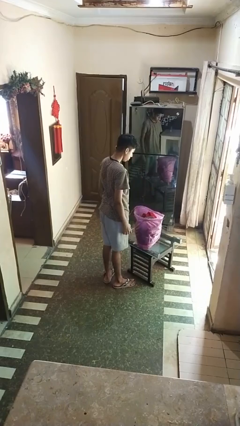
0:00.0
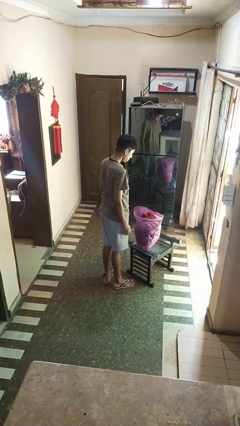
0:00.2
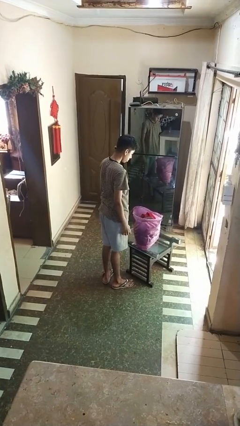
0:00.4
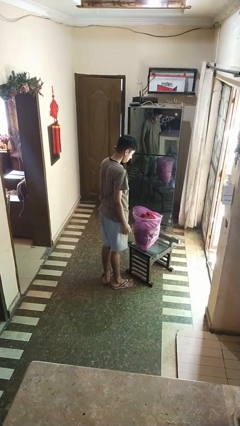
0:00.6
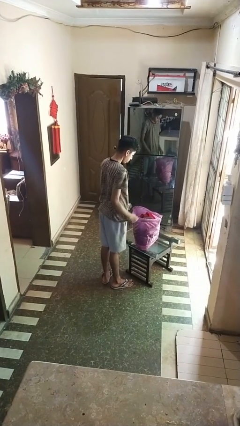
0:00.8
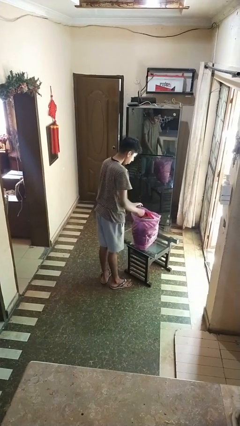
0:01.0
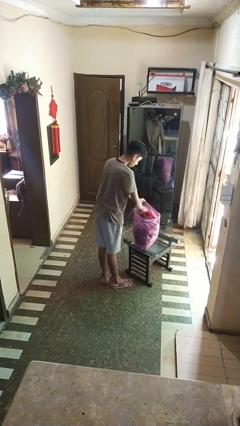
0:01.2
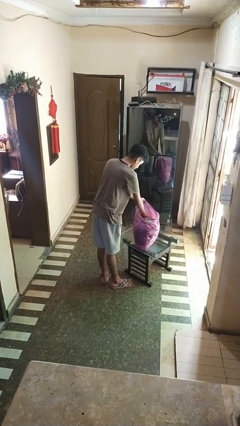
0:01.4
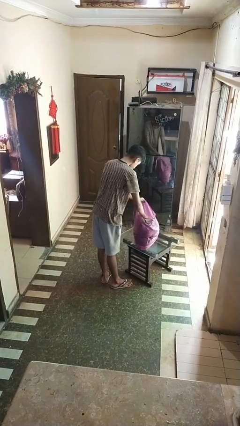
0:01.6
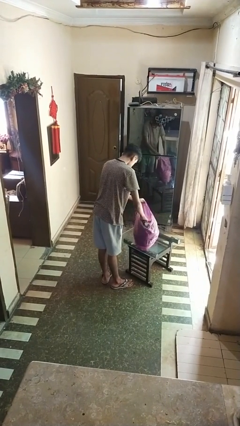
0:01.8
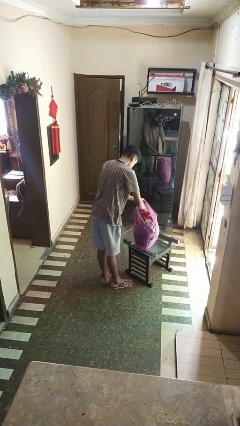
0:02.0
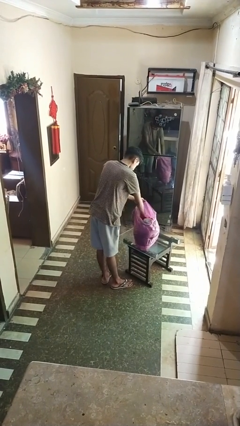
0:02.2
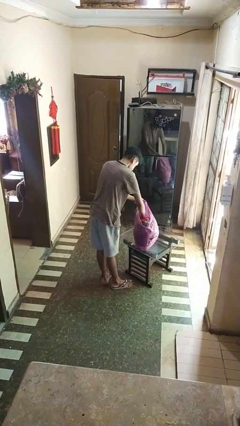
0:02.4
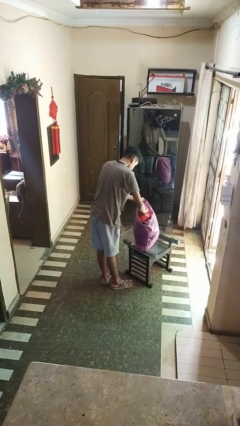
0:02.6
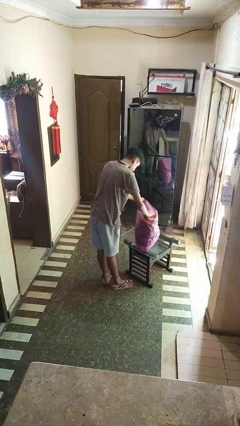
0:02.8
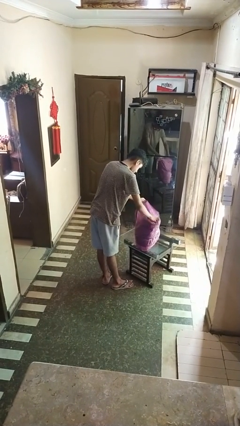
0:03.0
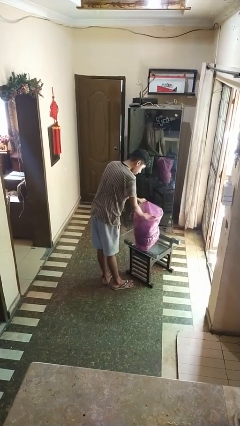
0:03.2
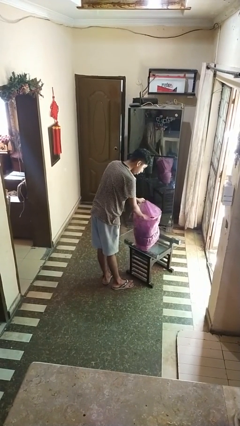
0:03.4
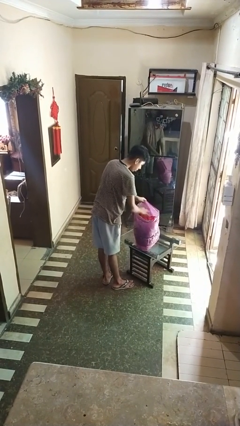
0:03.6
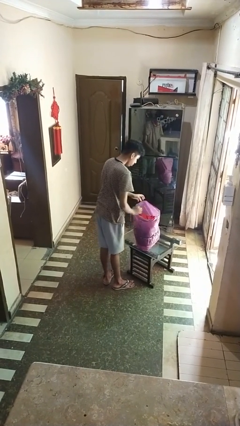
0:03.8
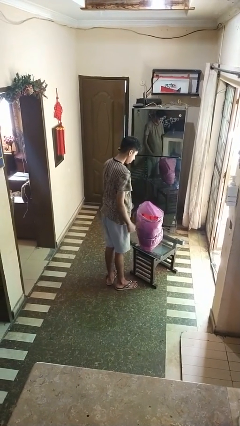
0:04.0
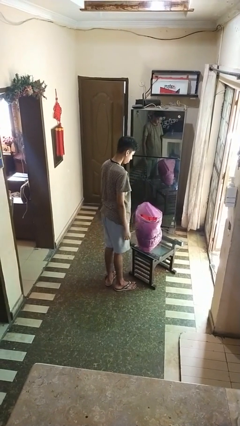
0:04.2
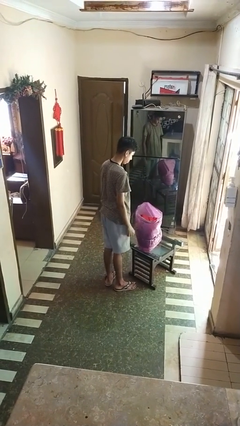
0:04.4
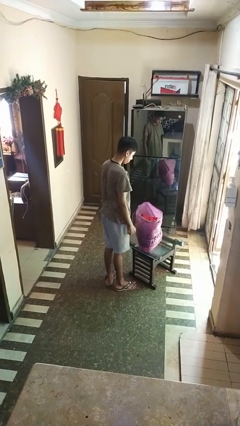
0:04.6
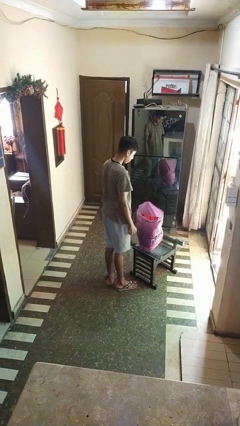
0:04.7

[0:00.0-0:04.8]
person searches in bag

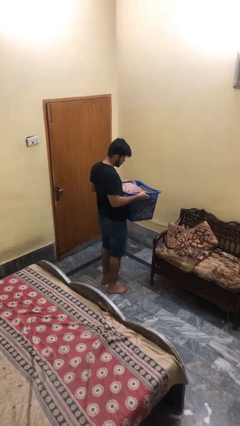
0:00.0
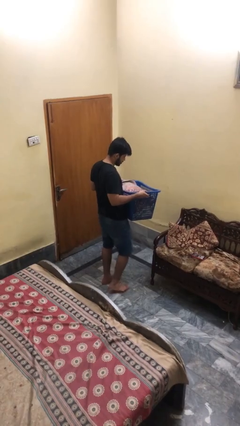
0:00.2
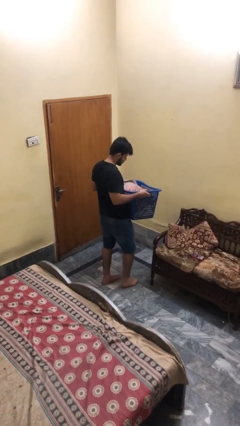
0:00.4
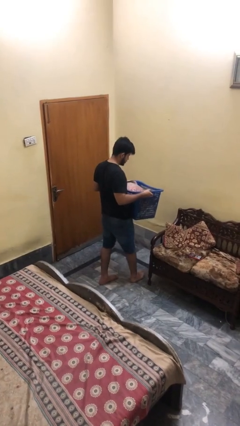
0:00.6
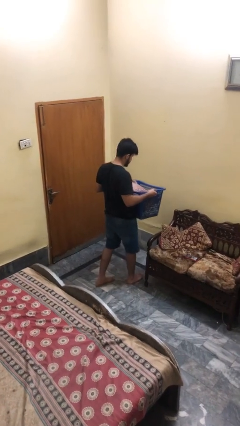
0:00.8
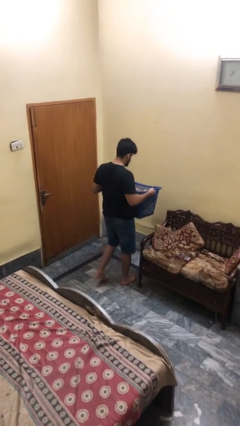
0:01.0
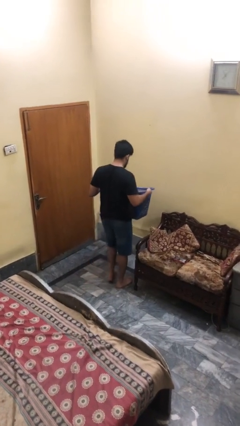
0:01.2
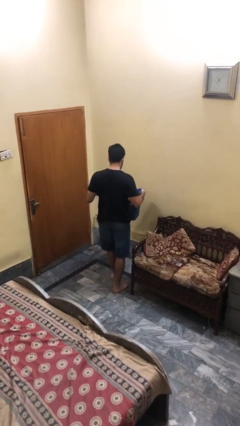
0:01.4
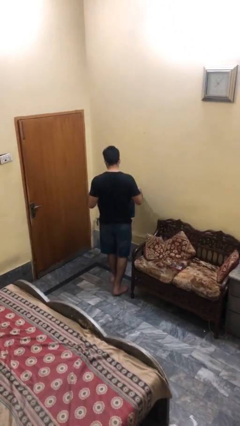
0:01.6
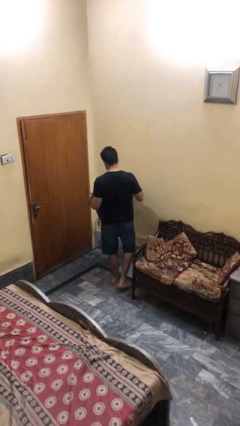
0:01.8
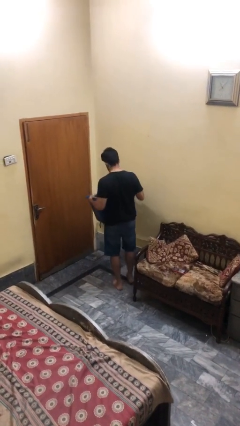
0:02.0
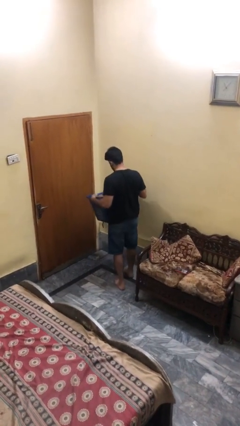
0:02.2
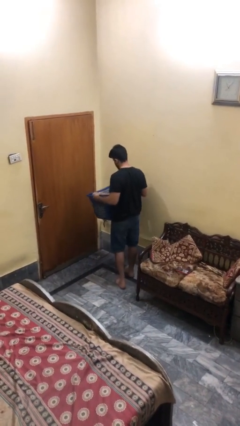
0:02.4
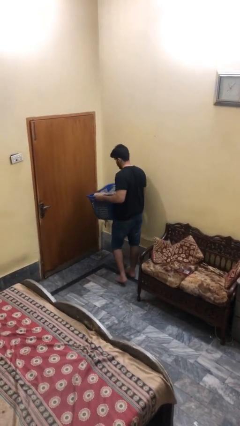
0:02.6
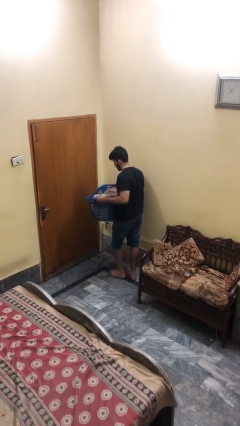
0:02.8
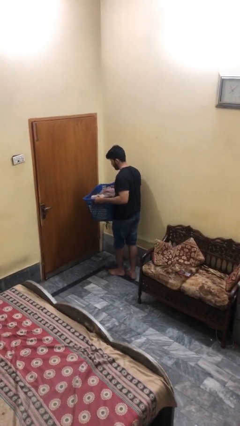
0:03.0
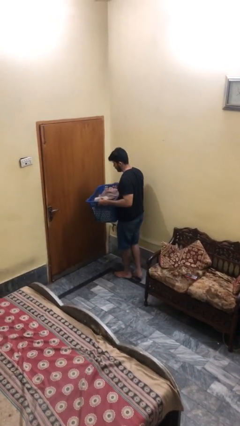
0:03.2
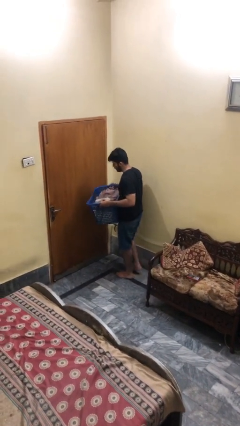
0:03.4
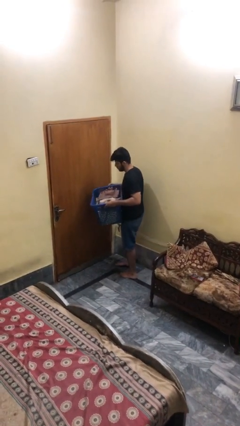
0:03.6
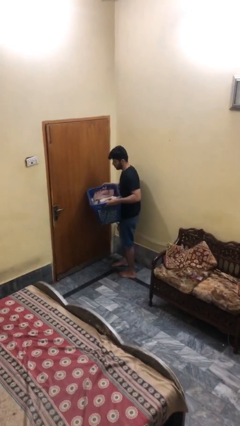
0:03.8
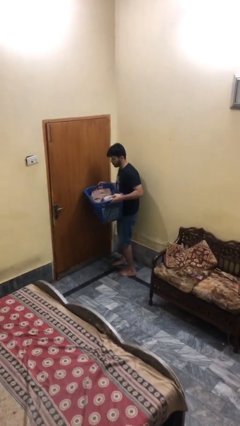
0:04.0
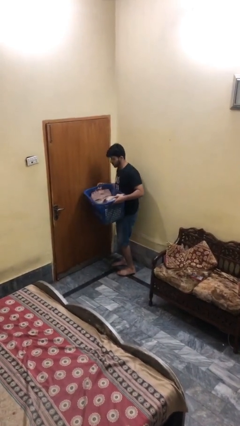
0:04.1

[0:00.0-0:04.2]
person carries laundry basket

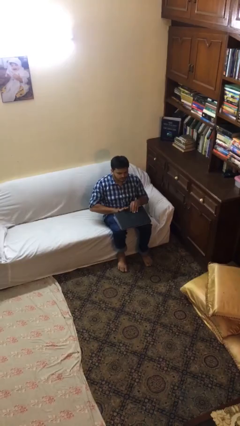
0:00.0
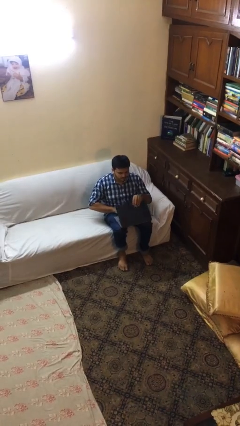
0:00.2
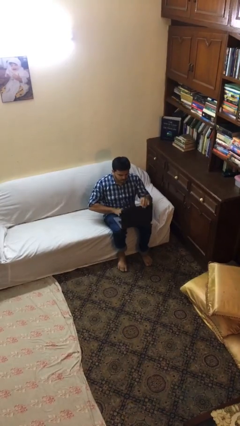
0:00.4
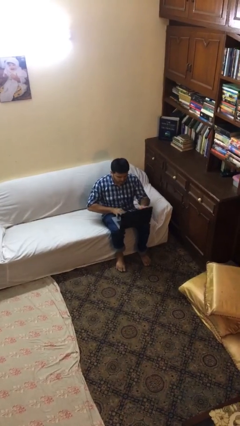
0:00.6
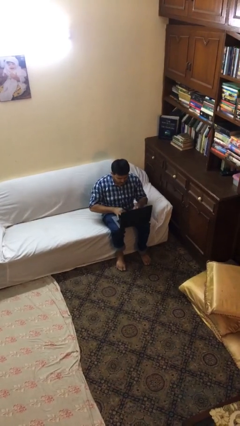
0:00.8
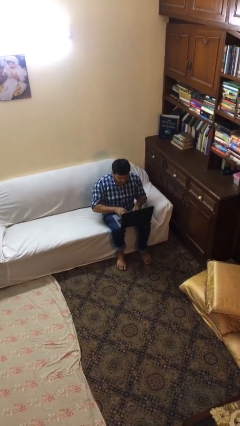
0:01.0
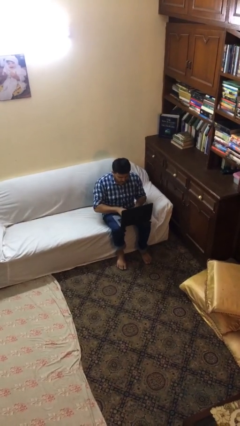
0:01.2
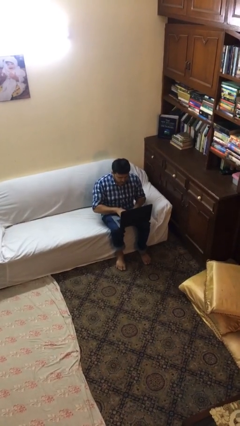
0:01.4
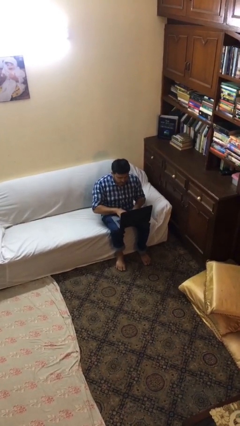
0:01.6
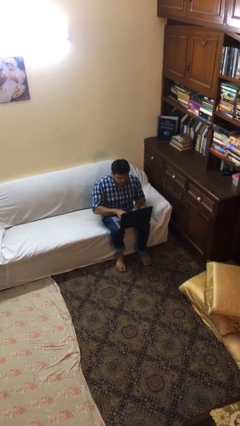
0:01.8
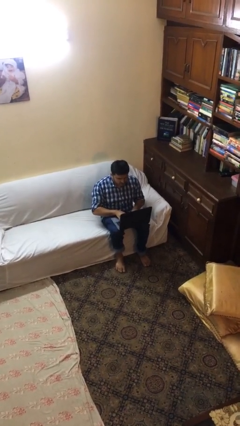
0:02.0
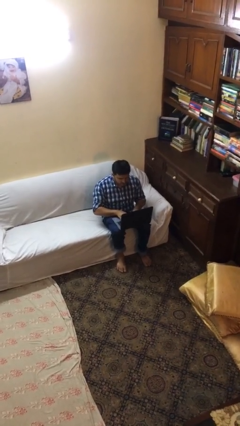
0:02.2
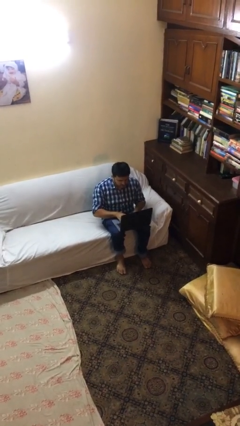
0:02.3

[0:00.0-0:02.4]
person interacts with laptop

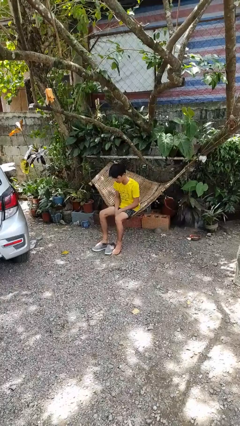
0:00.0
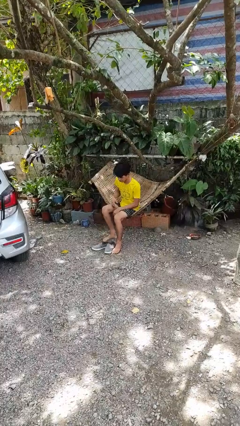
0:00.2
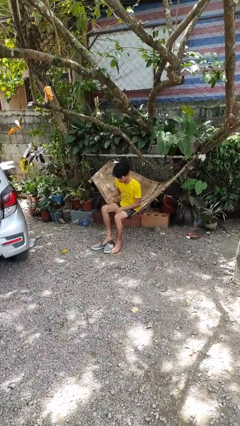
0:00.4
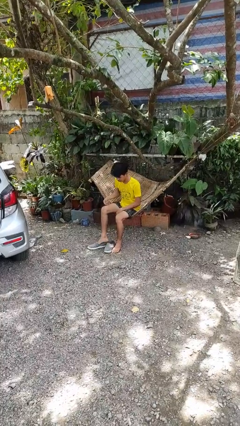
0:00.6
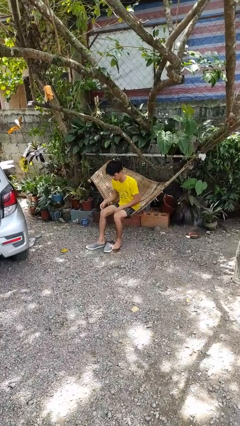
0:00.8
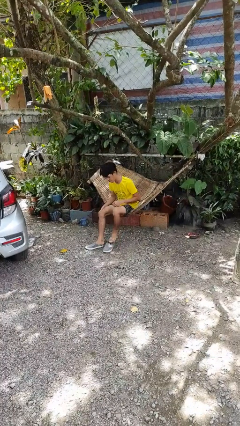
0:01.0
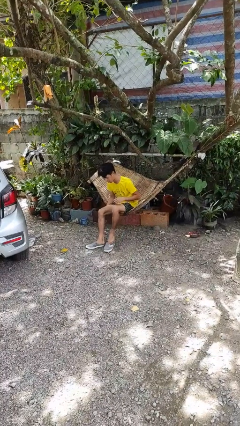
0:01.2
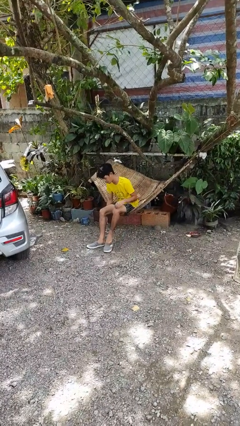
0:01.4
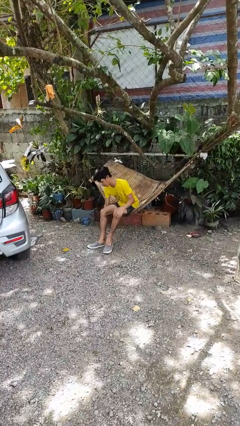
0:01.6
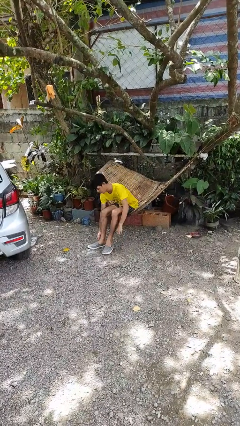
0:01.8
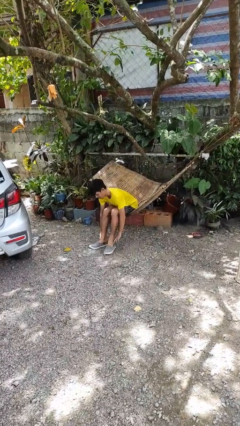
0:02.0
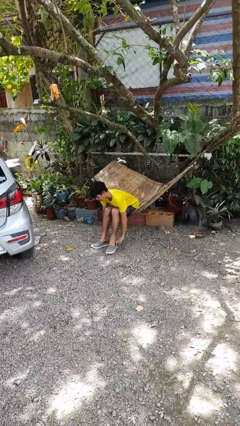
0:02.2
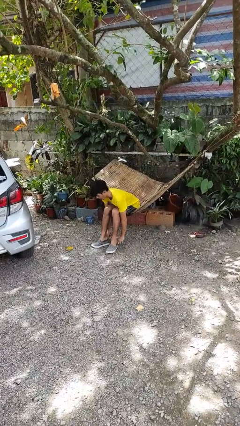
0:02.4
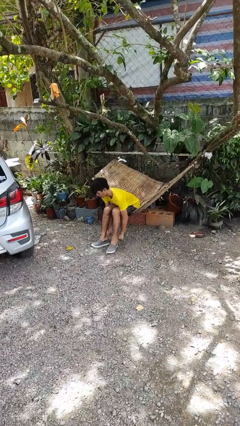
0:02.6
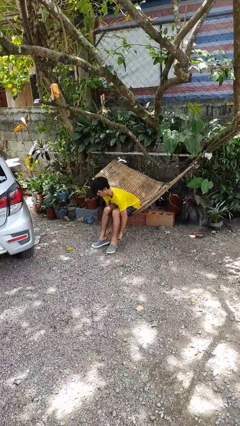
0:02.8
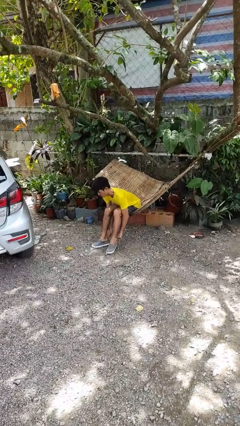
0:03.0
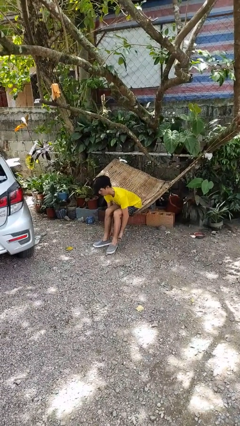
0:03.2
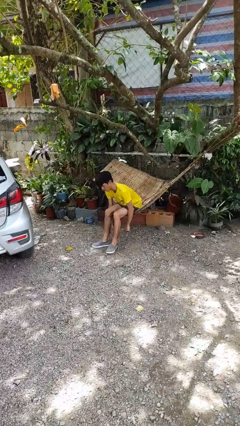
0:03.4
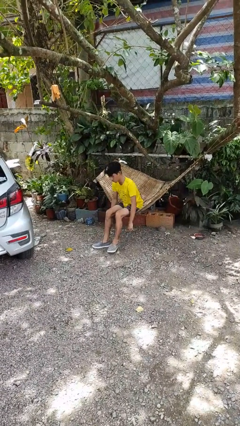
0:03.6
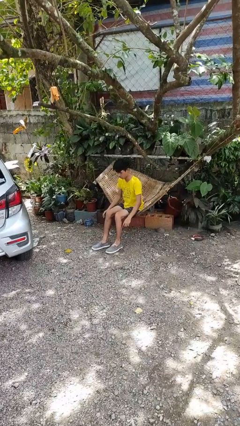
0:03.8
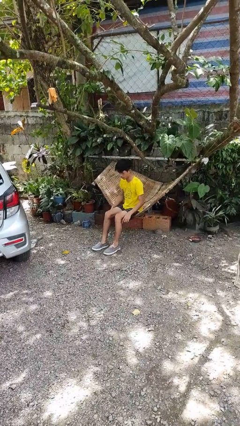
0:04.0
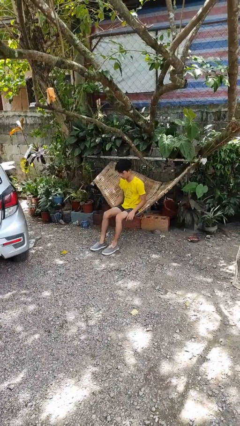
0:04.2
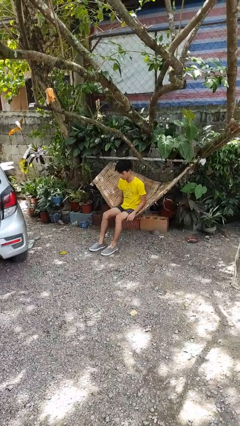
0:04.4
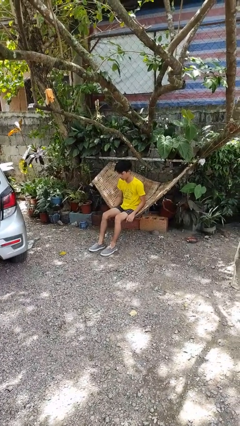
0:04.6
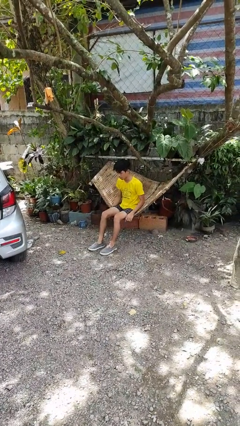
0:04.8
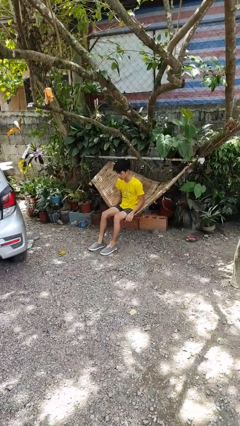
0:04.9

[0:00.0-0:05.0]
person puts on shoes

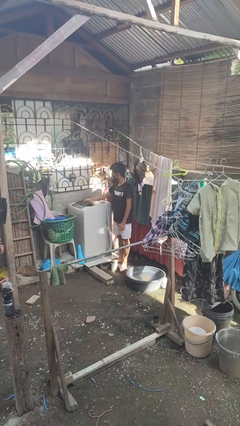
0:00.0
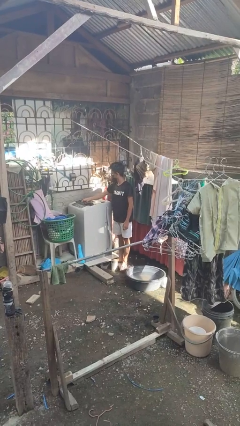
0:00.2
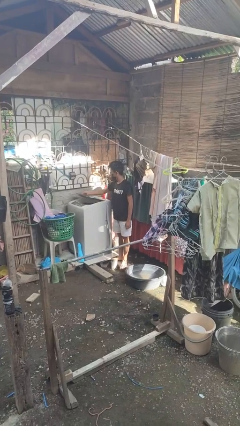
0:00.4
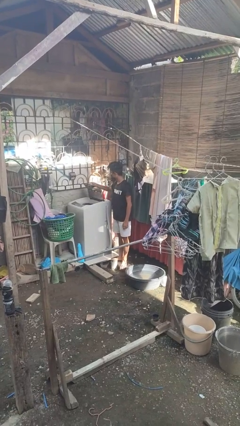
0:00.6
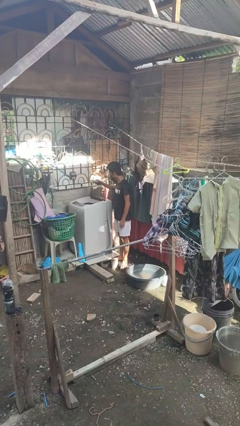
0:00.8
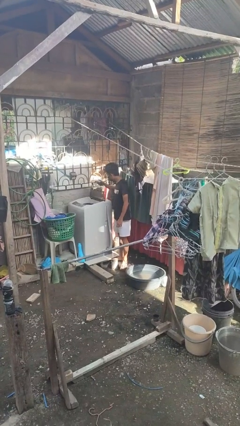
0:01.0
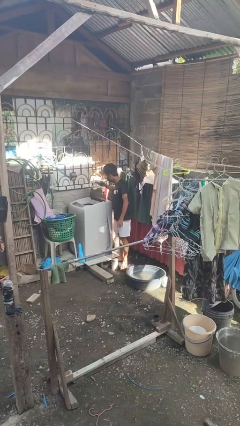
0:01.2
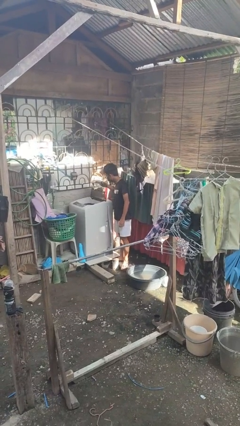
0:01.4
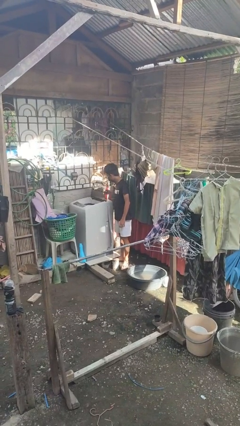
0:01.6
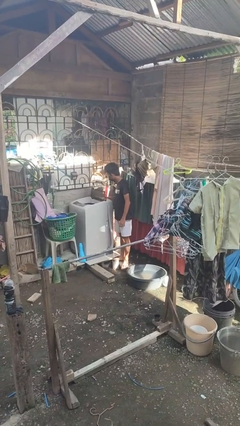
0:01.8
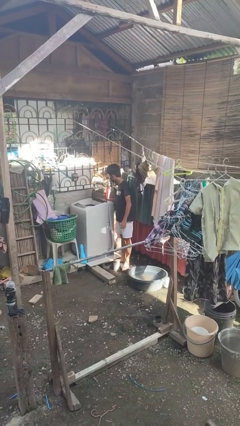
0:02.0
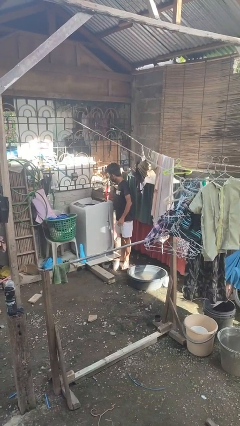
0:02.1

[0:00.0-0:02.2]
person opens clothes washer
